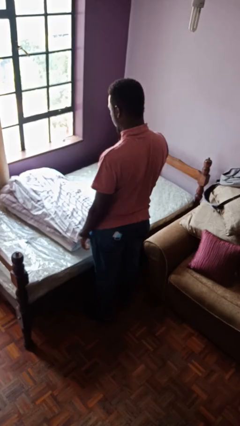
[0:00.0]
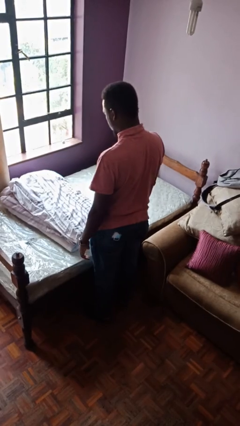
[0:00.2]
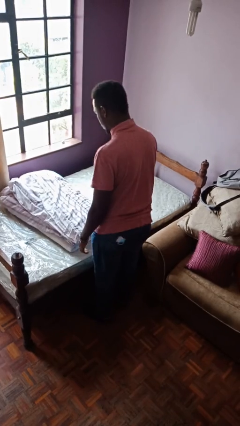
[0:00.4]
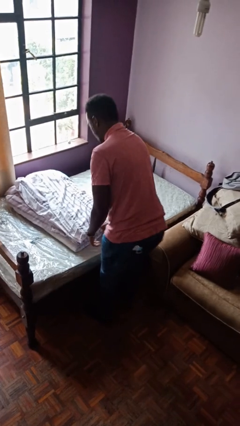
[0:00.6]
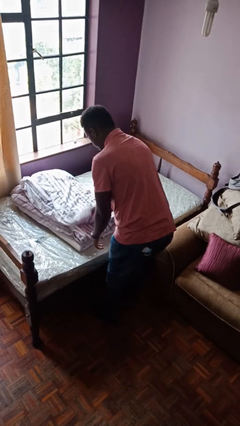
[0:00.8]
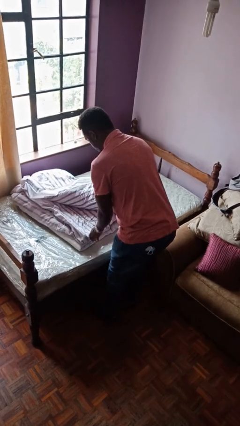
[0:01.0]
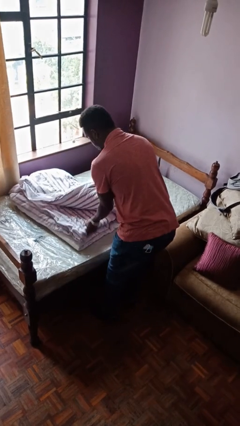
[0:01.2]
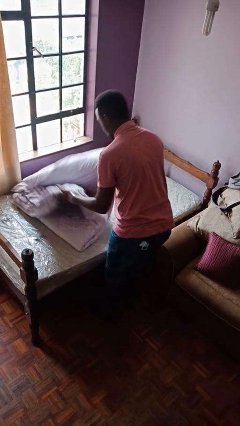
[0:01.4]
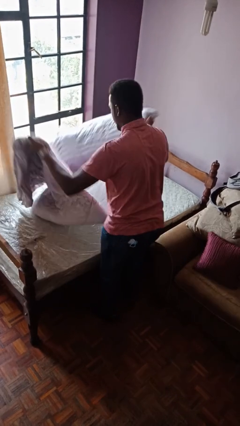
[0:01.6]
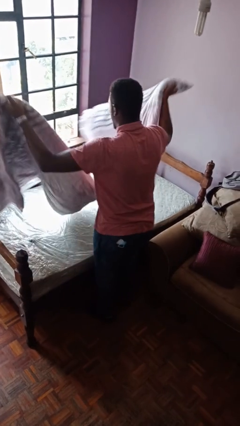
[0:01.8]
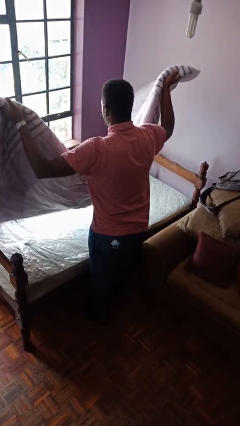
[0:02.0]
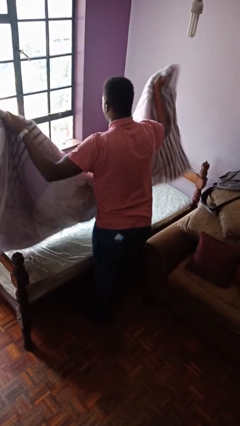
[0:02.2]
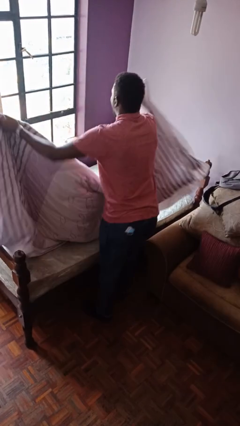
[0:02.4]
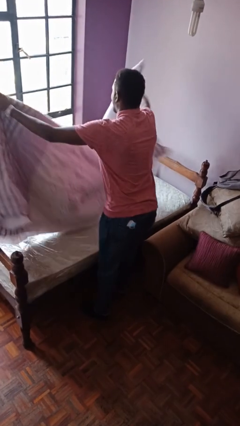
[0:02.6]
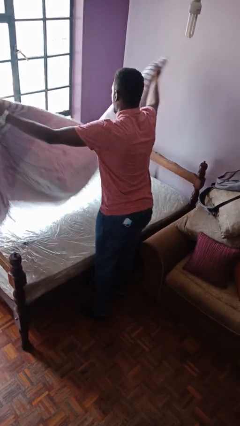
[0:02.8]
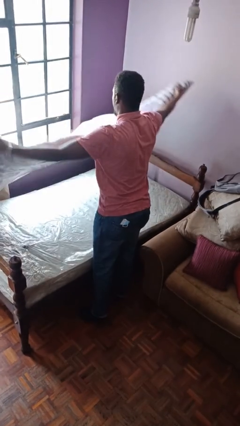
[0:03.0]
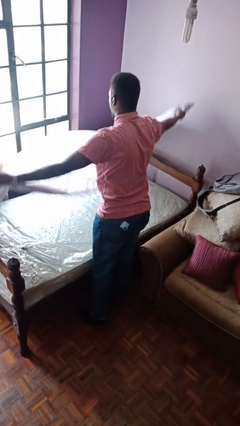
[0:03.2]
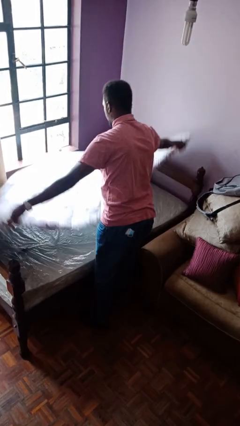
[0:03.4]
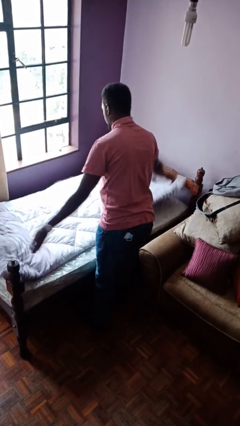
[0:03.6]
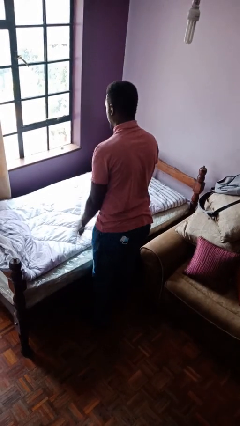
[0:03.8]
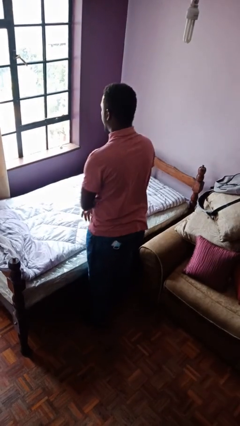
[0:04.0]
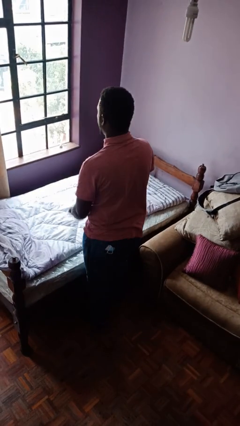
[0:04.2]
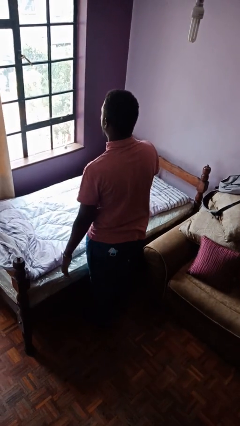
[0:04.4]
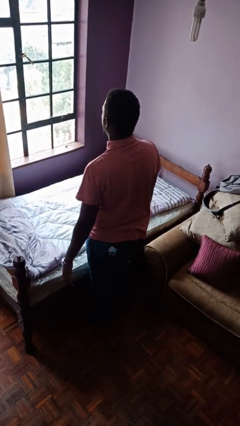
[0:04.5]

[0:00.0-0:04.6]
person unfolds blanket

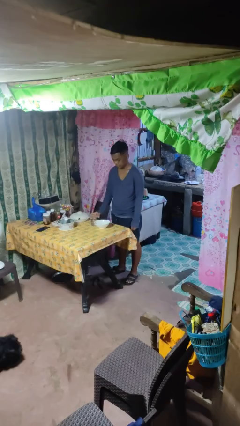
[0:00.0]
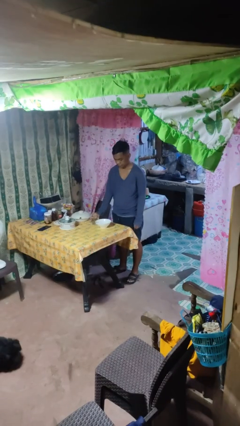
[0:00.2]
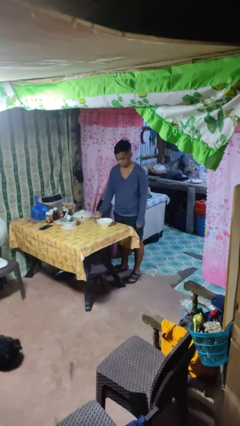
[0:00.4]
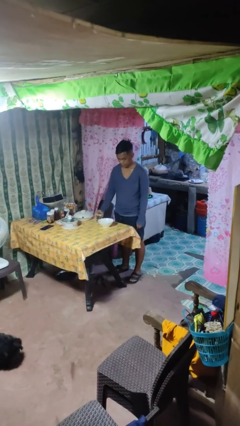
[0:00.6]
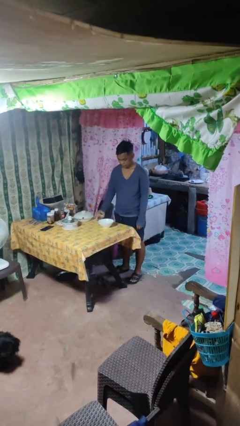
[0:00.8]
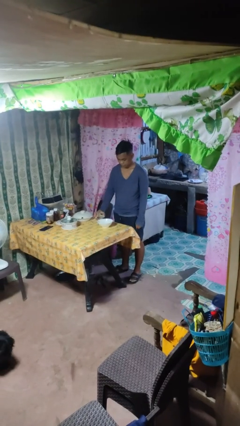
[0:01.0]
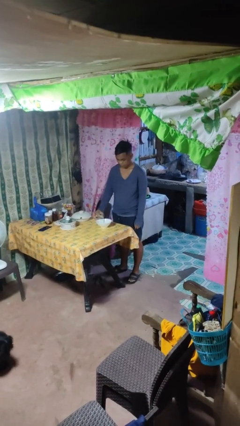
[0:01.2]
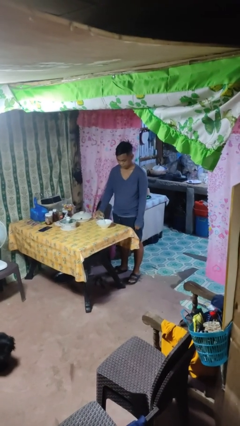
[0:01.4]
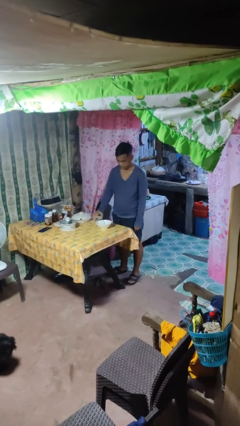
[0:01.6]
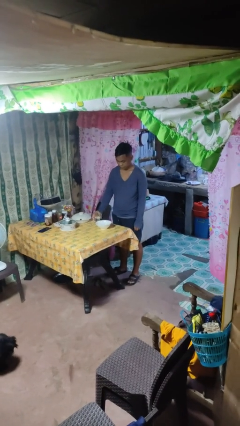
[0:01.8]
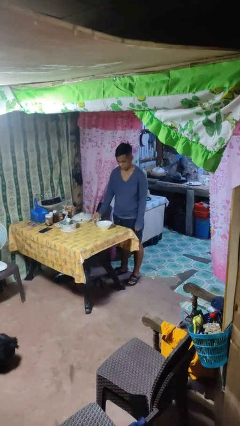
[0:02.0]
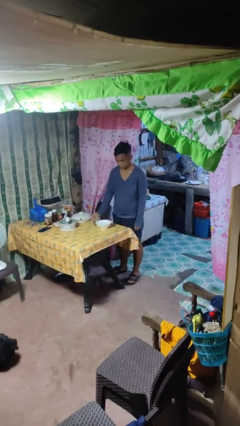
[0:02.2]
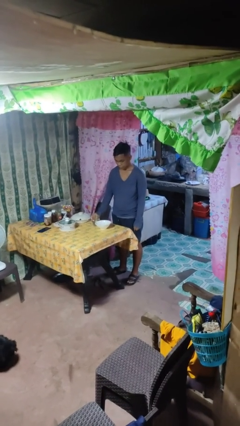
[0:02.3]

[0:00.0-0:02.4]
person pours into bowl

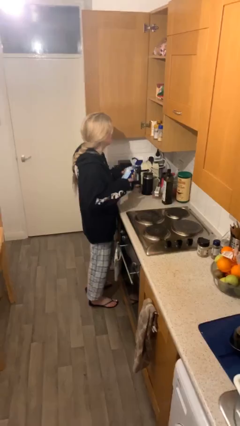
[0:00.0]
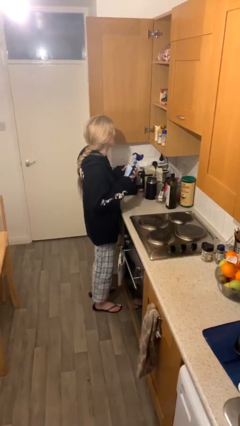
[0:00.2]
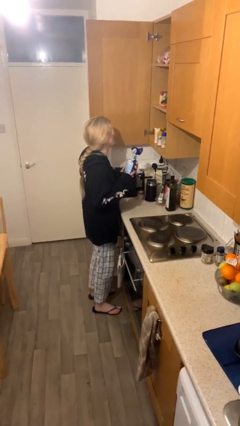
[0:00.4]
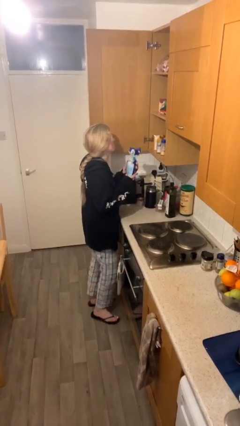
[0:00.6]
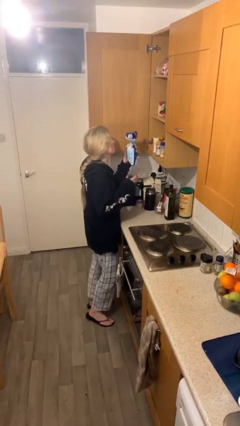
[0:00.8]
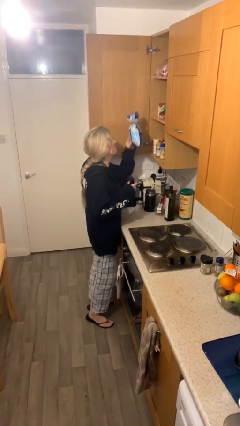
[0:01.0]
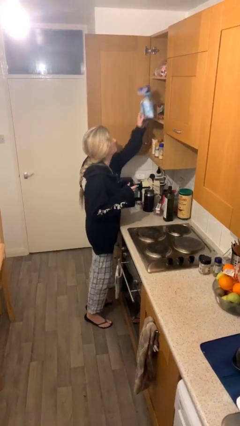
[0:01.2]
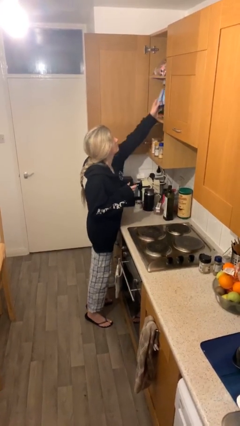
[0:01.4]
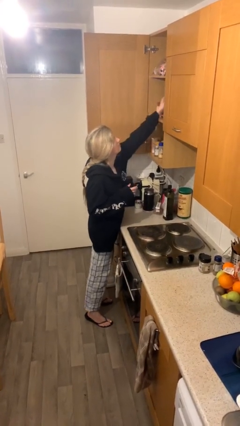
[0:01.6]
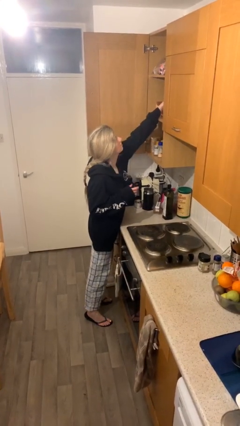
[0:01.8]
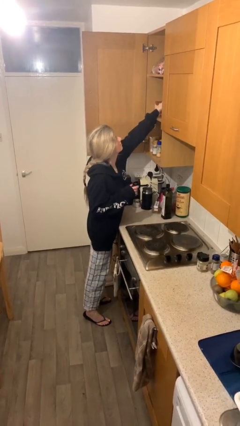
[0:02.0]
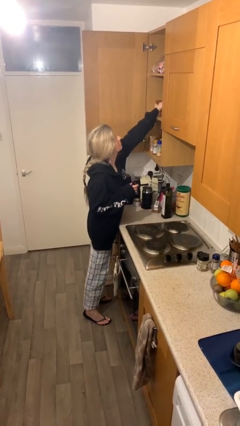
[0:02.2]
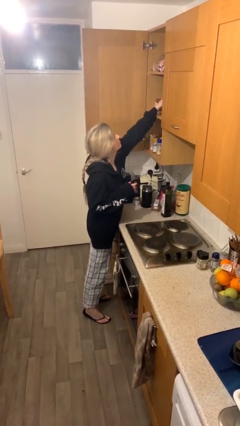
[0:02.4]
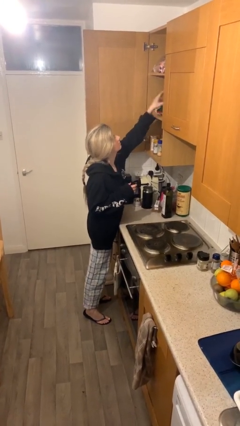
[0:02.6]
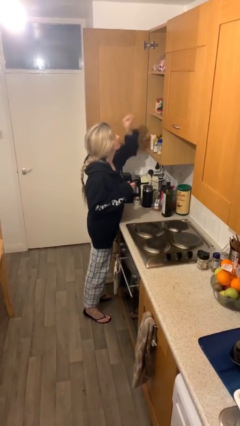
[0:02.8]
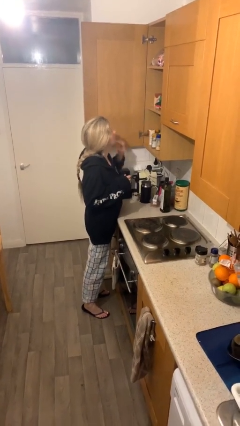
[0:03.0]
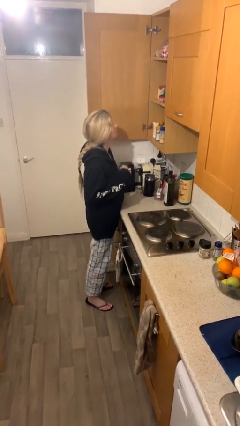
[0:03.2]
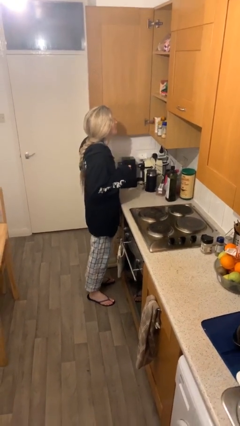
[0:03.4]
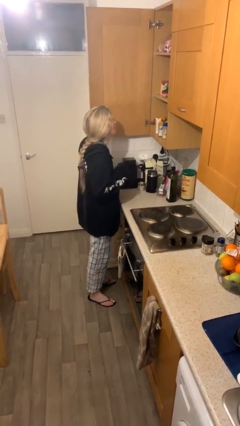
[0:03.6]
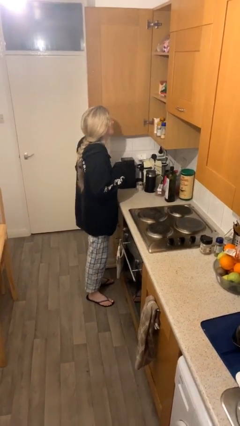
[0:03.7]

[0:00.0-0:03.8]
person puts down object on shelf

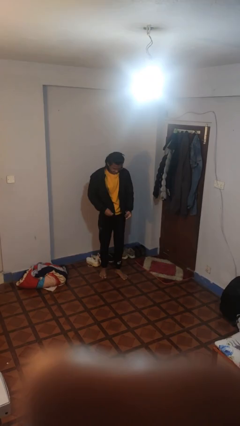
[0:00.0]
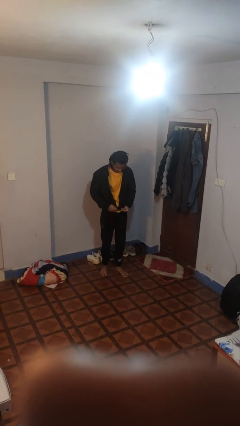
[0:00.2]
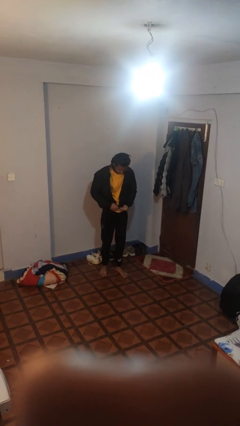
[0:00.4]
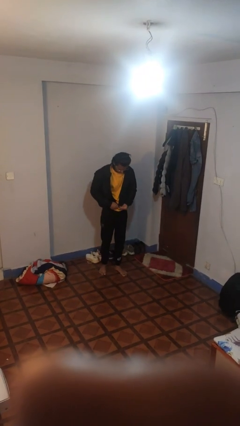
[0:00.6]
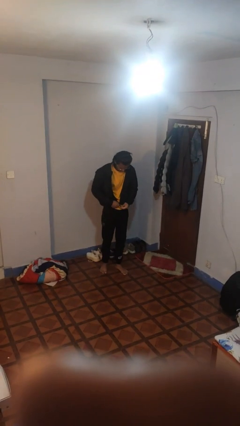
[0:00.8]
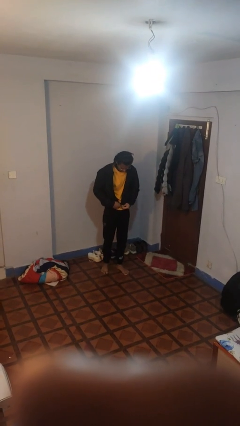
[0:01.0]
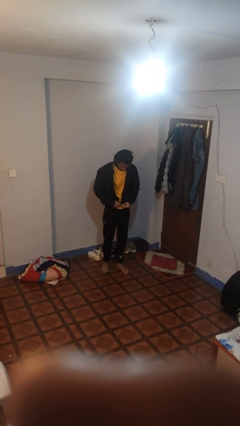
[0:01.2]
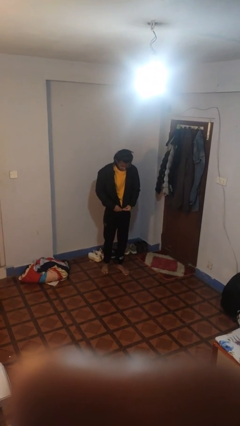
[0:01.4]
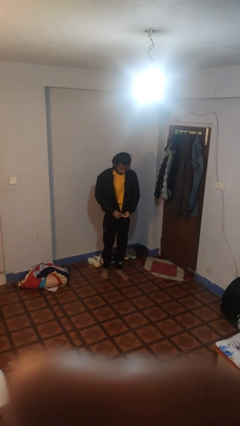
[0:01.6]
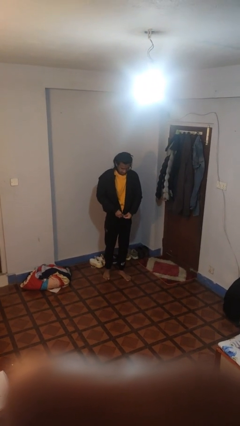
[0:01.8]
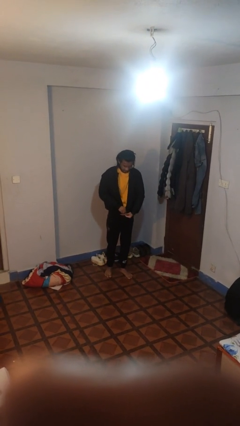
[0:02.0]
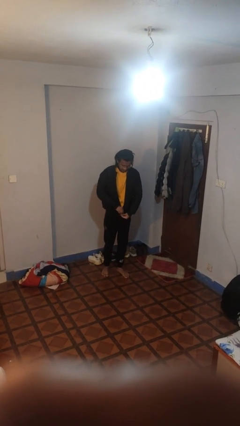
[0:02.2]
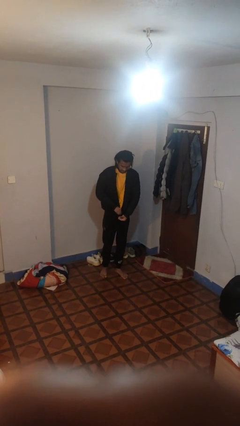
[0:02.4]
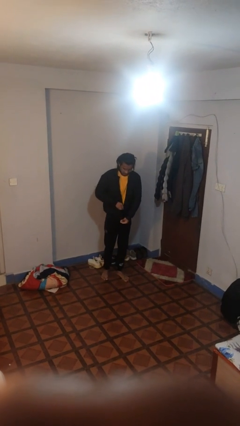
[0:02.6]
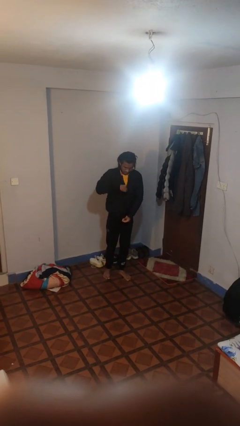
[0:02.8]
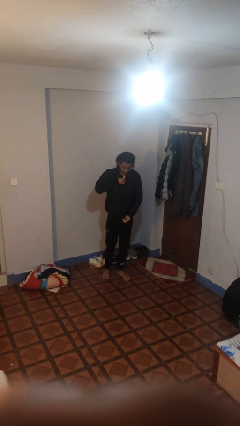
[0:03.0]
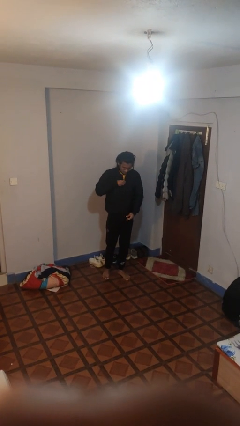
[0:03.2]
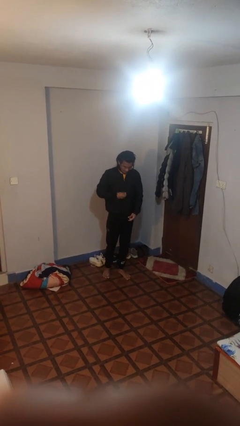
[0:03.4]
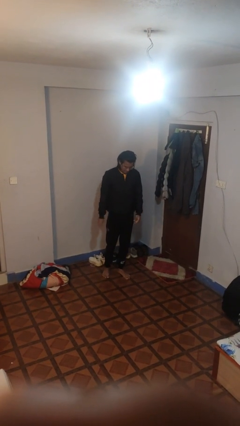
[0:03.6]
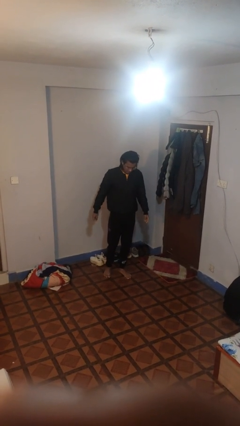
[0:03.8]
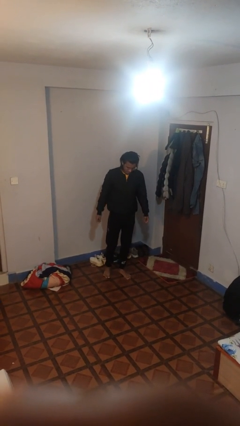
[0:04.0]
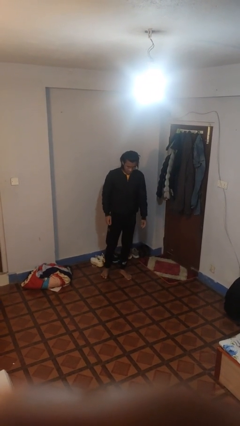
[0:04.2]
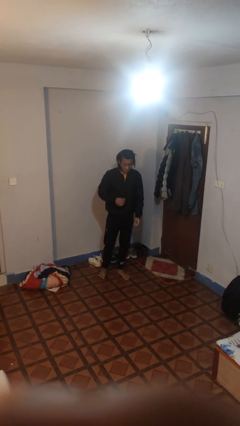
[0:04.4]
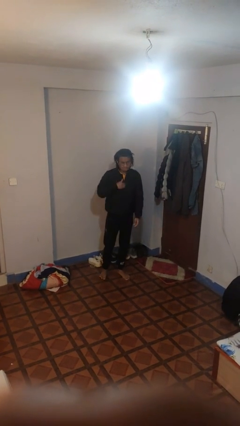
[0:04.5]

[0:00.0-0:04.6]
person zips up jacket

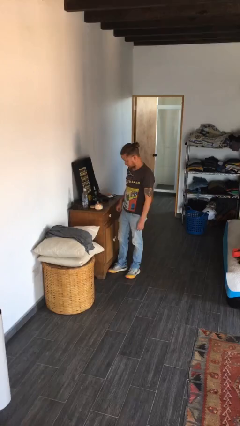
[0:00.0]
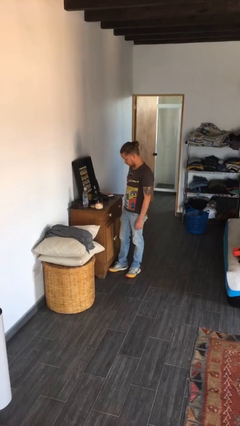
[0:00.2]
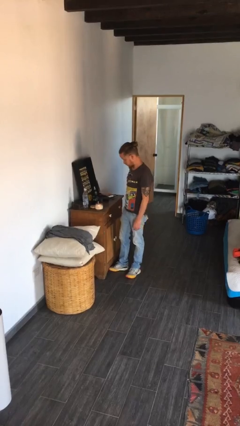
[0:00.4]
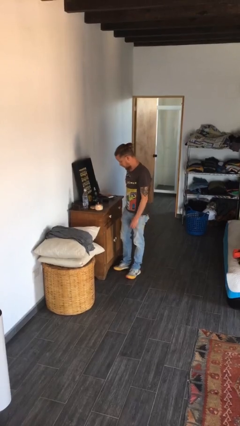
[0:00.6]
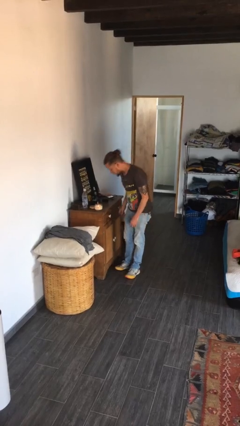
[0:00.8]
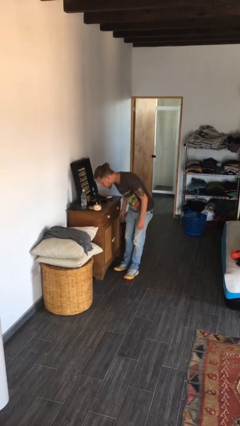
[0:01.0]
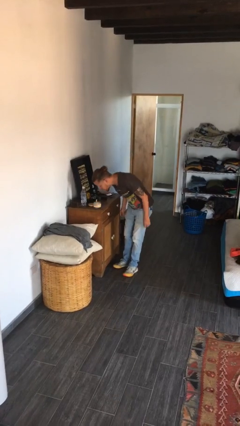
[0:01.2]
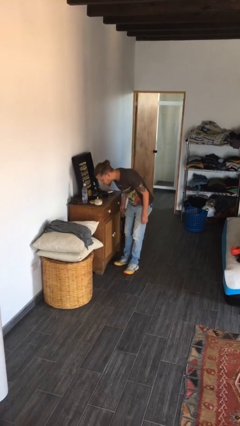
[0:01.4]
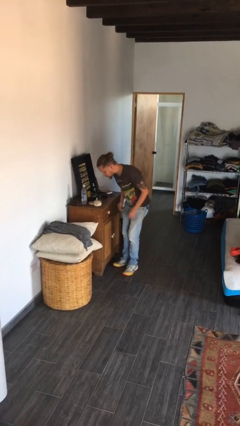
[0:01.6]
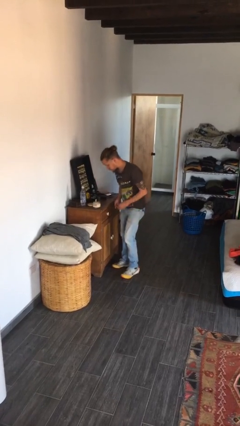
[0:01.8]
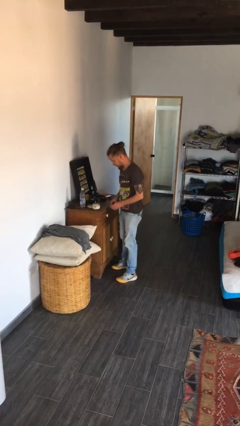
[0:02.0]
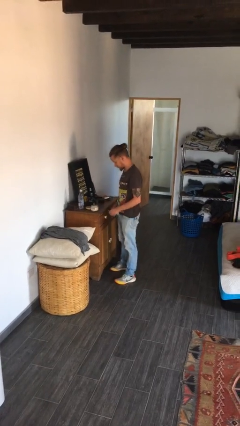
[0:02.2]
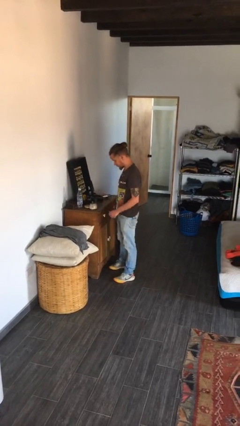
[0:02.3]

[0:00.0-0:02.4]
person extinguishes candle
